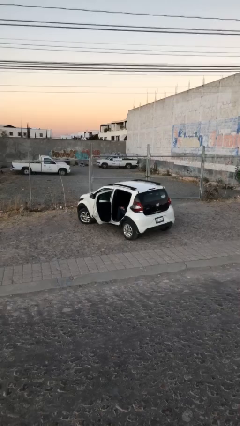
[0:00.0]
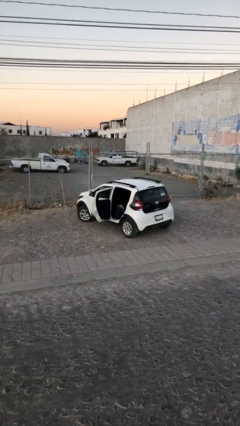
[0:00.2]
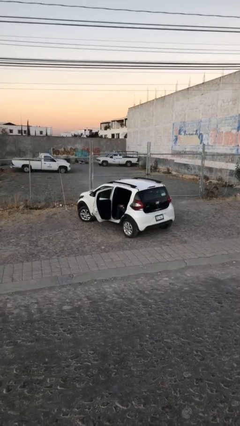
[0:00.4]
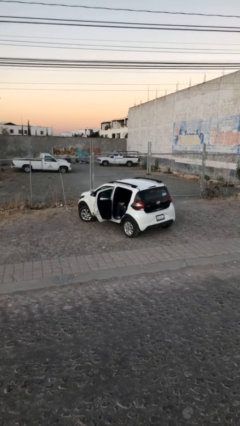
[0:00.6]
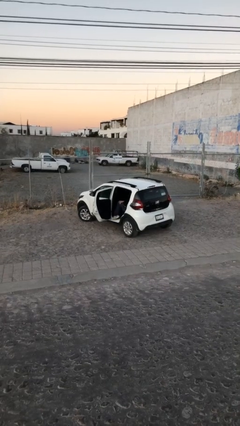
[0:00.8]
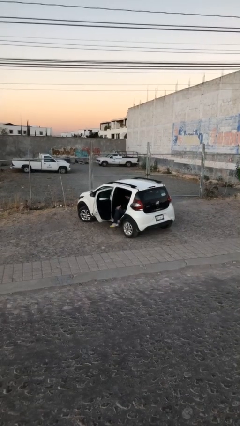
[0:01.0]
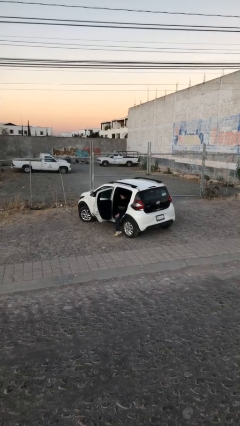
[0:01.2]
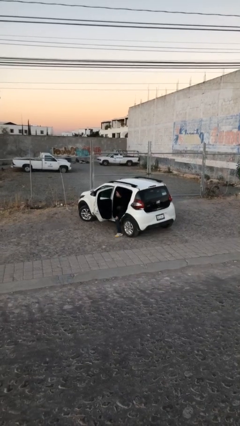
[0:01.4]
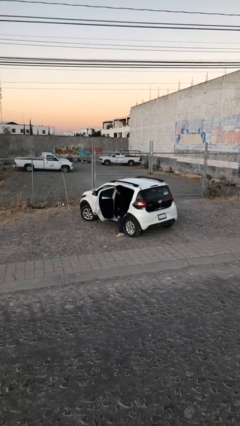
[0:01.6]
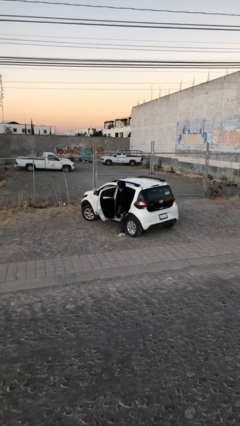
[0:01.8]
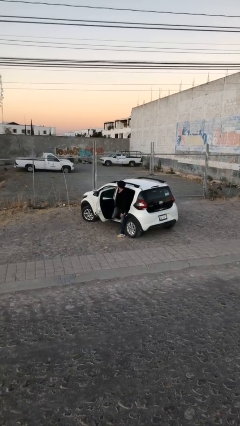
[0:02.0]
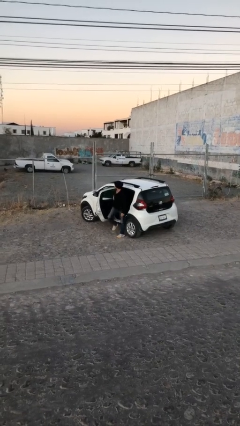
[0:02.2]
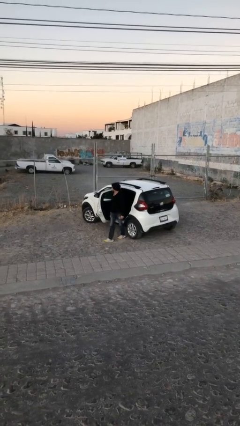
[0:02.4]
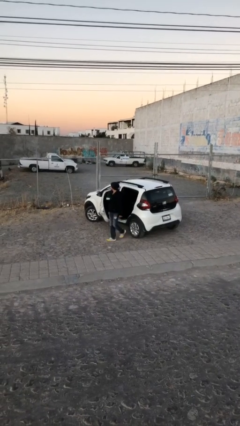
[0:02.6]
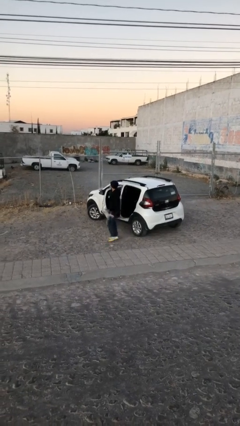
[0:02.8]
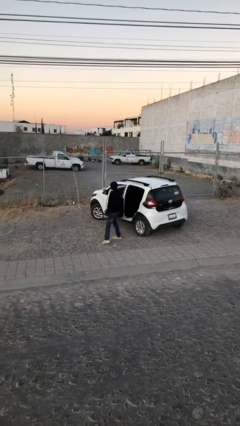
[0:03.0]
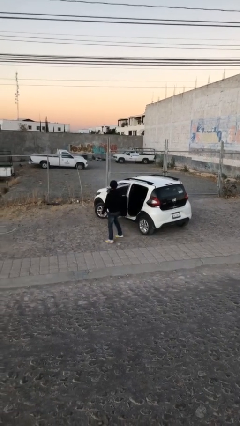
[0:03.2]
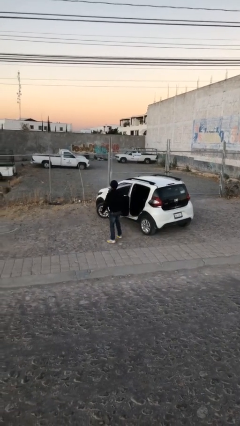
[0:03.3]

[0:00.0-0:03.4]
person exits car

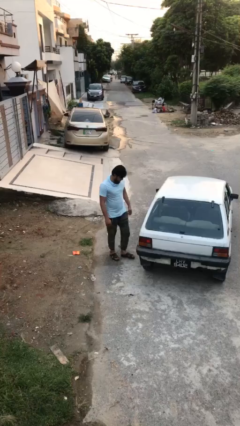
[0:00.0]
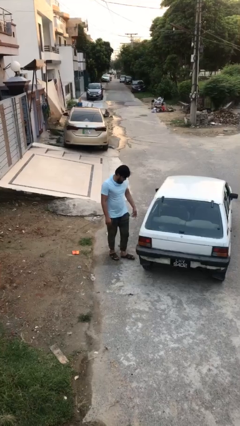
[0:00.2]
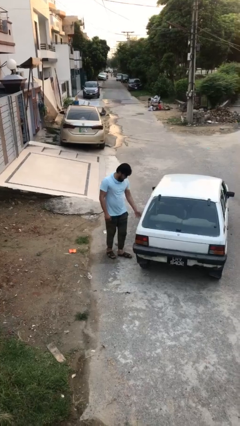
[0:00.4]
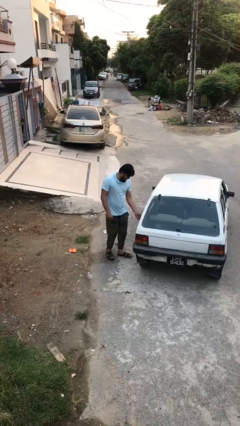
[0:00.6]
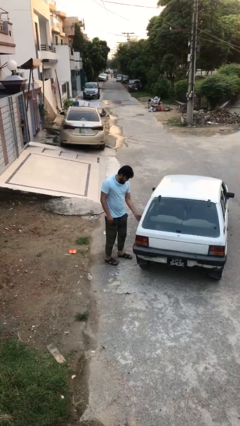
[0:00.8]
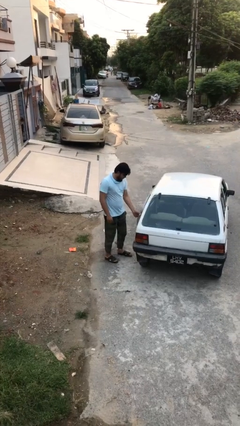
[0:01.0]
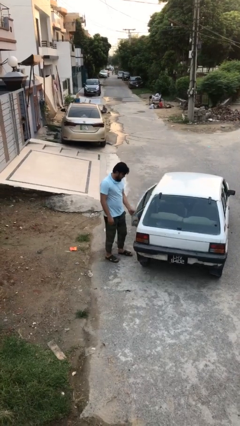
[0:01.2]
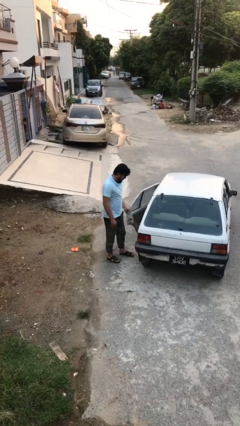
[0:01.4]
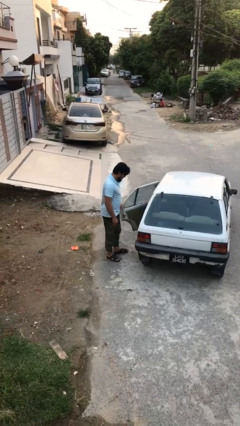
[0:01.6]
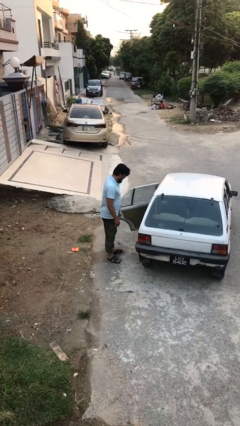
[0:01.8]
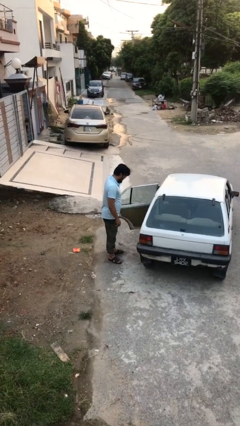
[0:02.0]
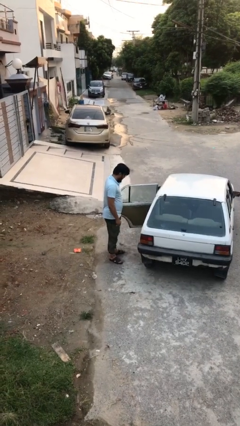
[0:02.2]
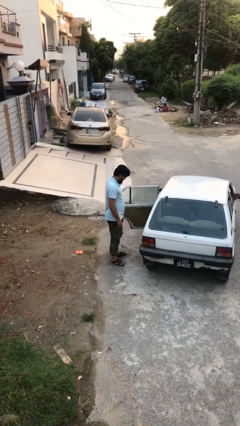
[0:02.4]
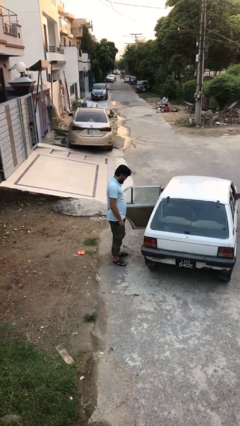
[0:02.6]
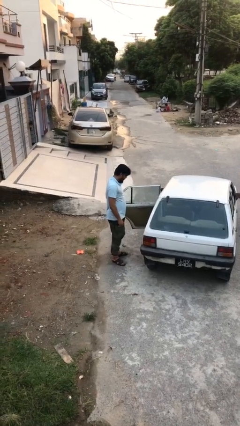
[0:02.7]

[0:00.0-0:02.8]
person opens car door

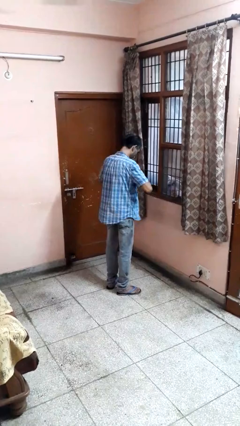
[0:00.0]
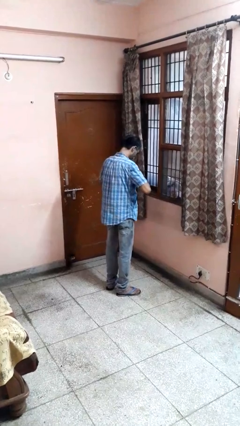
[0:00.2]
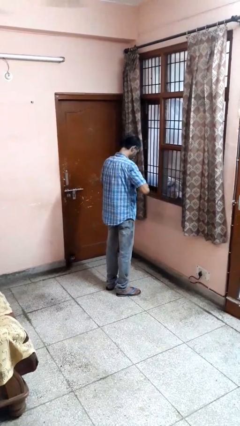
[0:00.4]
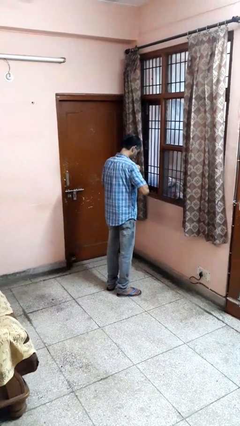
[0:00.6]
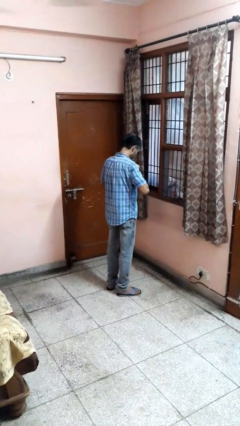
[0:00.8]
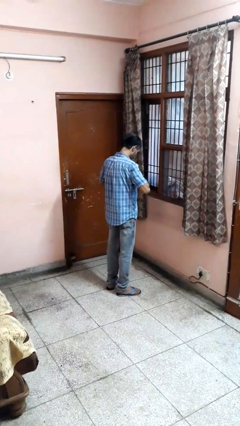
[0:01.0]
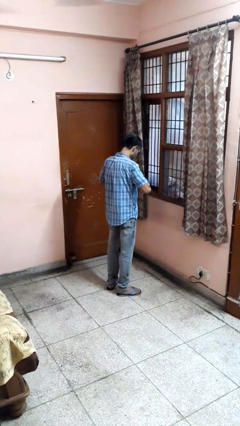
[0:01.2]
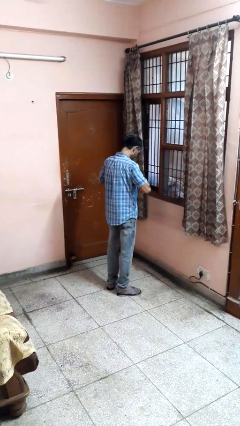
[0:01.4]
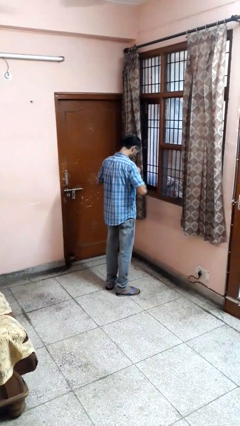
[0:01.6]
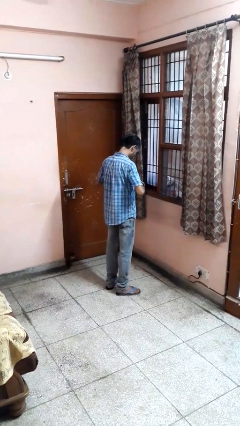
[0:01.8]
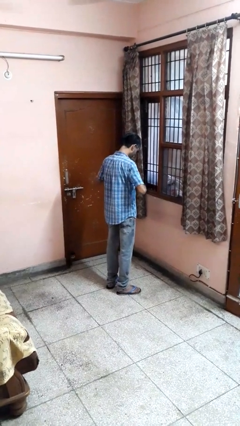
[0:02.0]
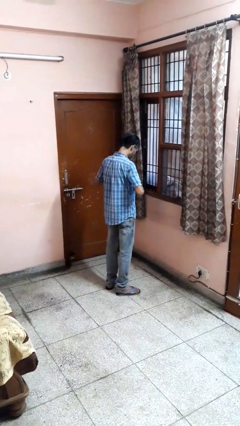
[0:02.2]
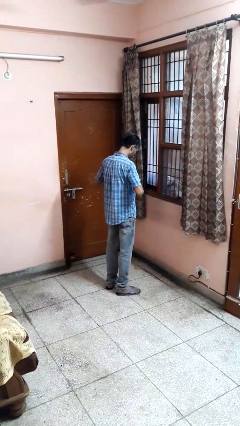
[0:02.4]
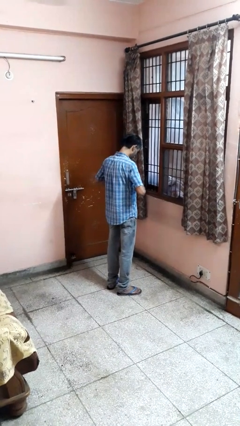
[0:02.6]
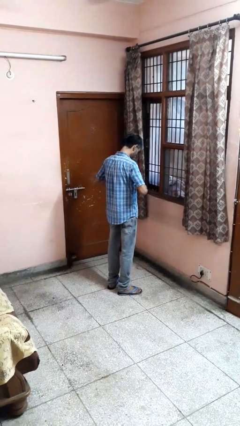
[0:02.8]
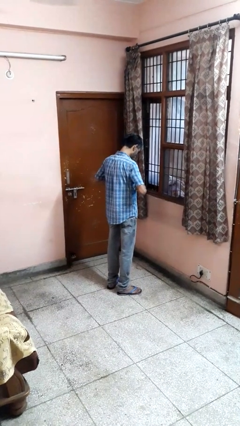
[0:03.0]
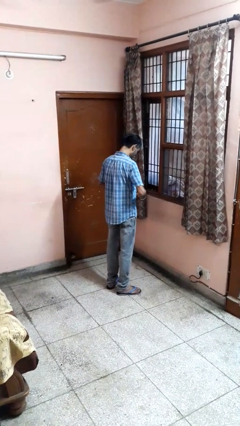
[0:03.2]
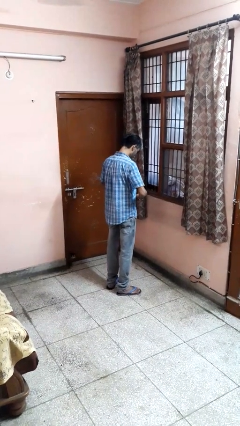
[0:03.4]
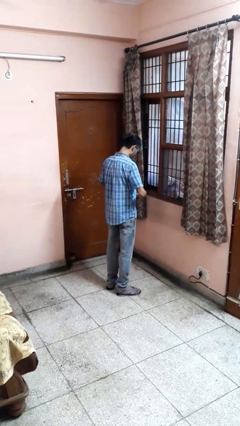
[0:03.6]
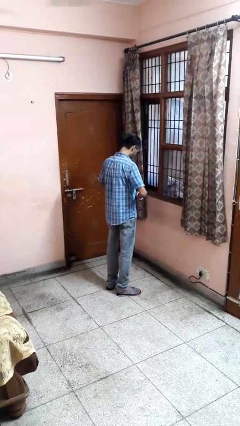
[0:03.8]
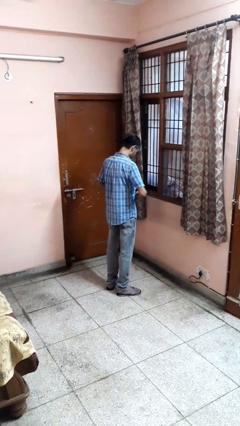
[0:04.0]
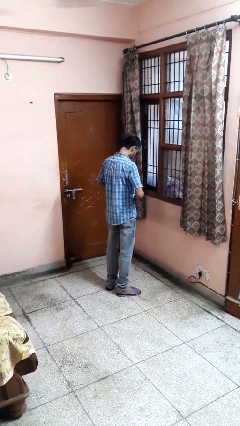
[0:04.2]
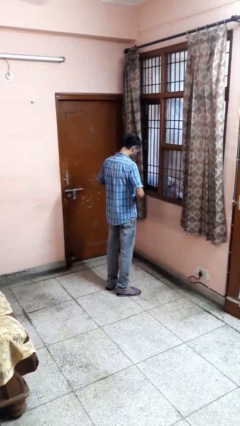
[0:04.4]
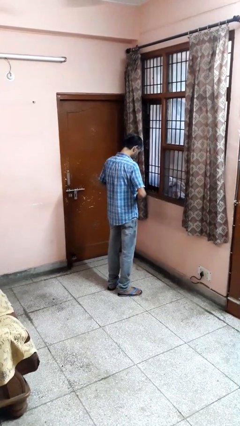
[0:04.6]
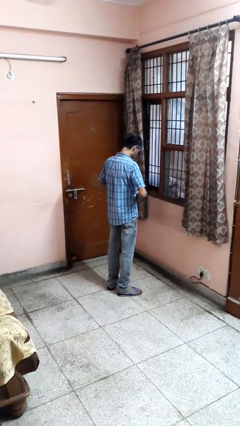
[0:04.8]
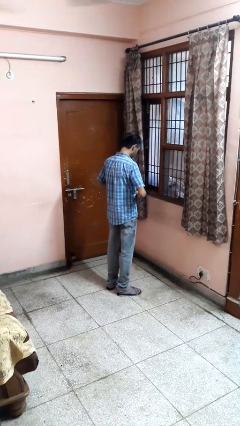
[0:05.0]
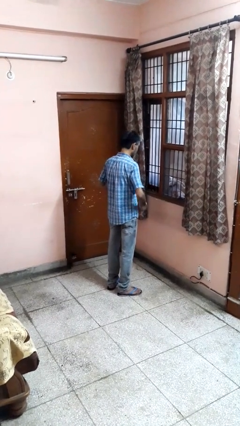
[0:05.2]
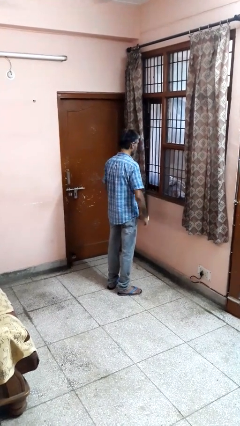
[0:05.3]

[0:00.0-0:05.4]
person buttons shirt

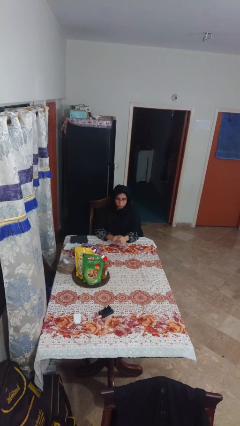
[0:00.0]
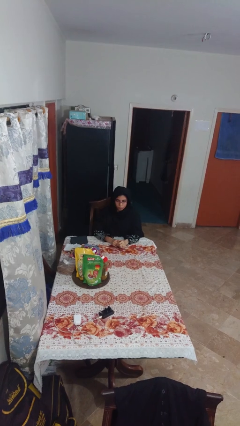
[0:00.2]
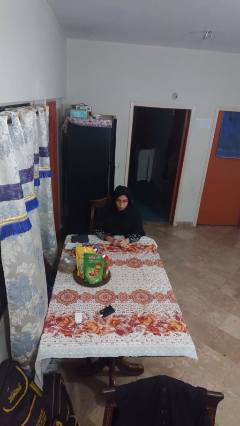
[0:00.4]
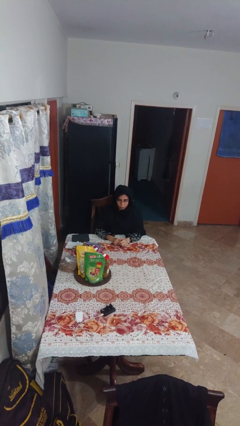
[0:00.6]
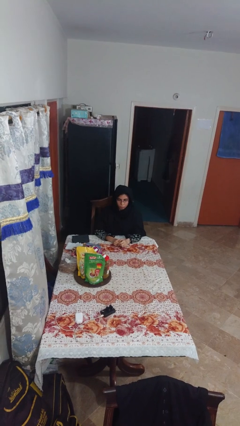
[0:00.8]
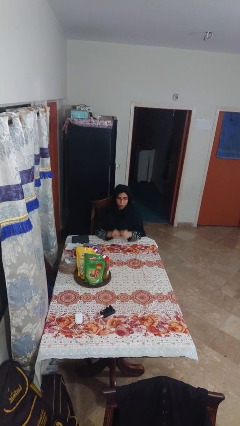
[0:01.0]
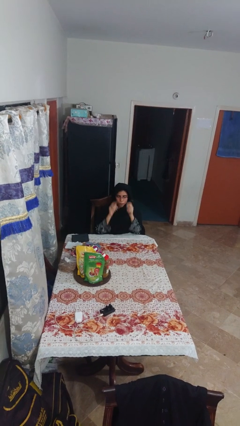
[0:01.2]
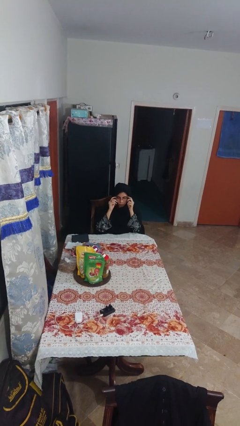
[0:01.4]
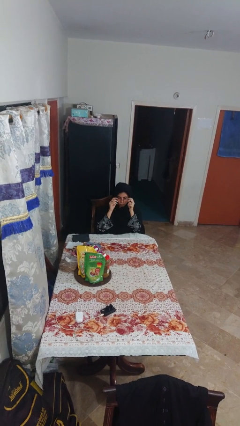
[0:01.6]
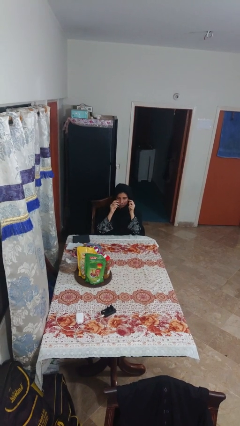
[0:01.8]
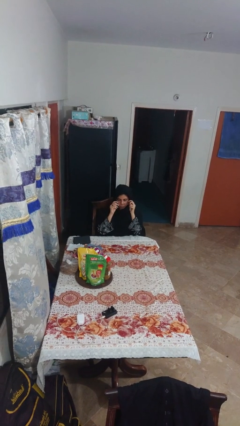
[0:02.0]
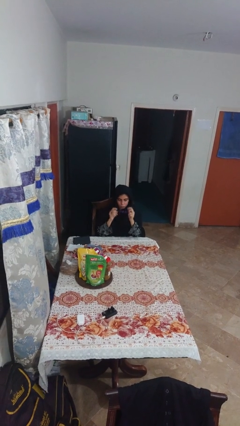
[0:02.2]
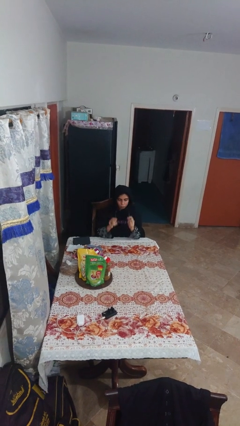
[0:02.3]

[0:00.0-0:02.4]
person takes off glasses

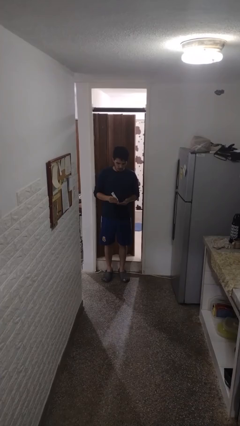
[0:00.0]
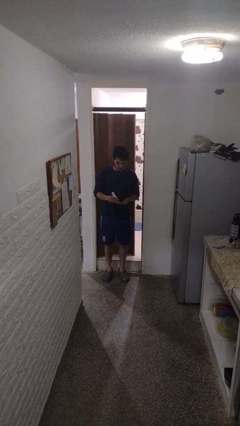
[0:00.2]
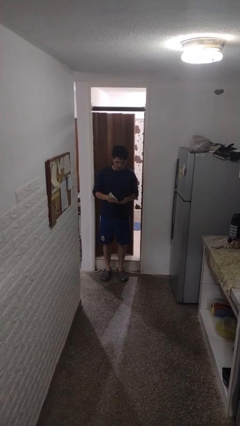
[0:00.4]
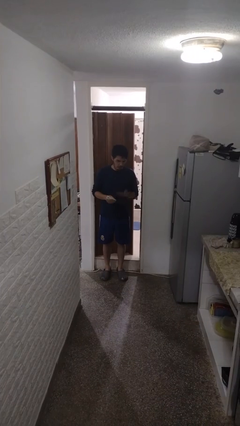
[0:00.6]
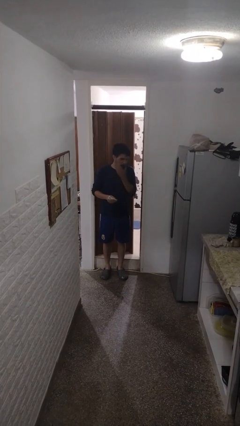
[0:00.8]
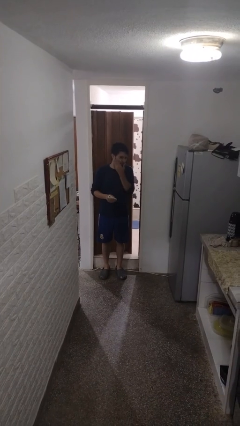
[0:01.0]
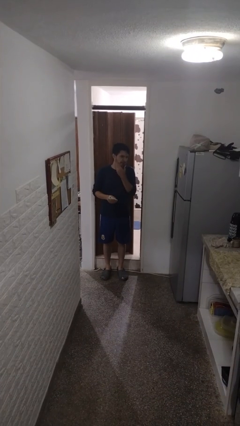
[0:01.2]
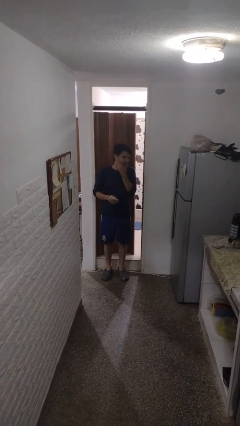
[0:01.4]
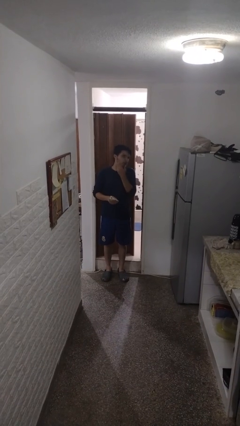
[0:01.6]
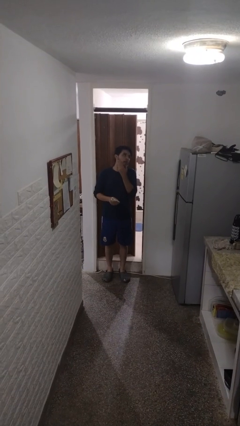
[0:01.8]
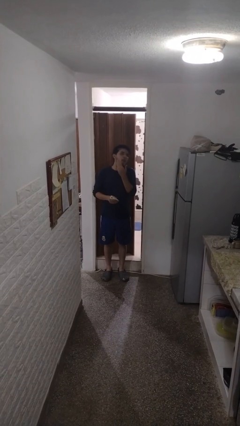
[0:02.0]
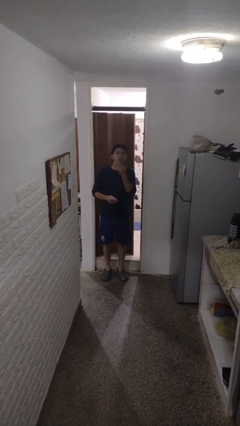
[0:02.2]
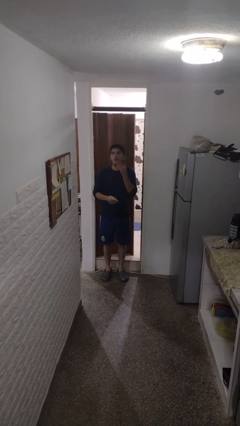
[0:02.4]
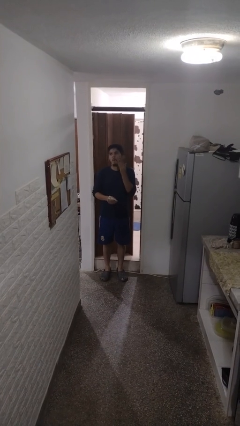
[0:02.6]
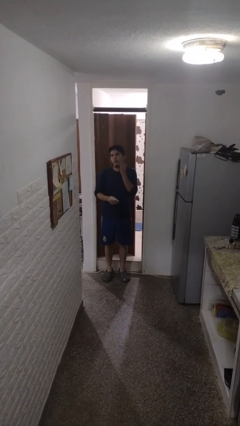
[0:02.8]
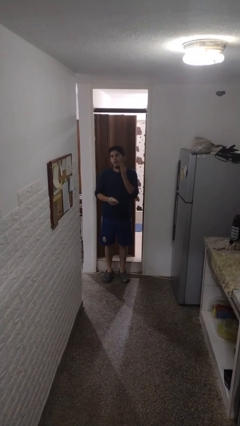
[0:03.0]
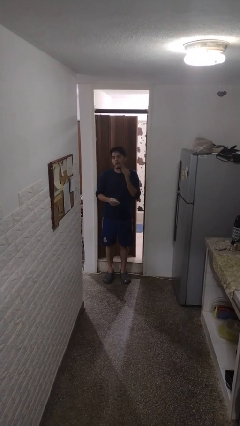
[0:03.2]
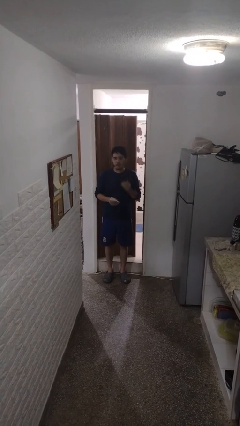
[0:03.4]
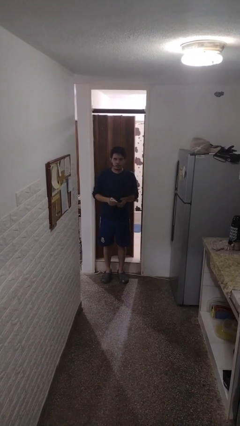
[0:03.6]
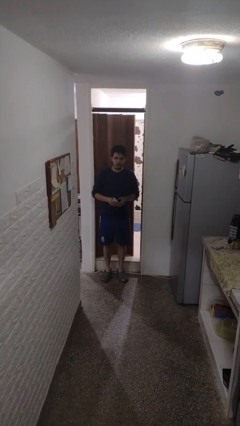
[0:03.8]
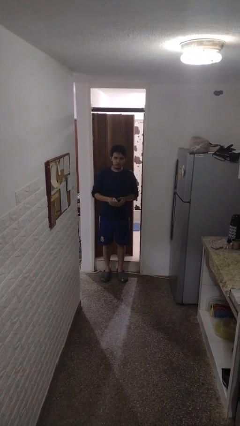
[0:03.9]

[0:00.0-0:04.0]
person applies facial moisturizer
